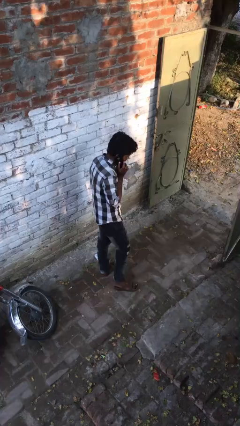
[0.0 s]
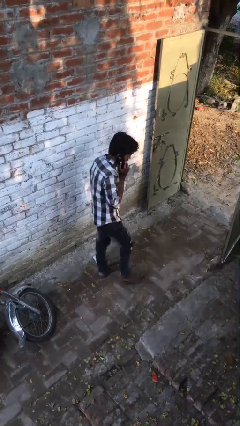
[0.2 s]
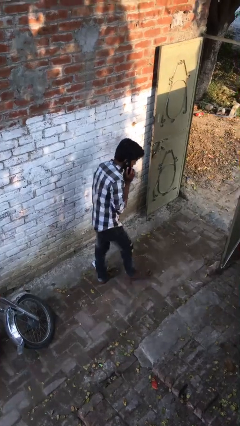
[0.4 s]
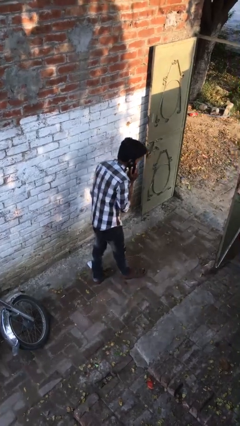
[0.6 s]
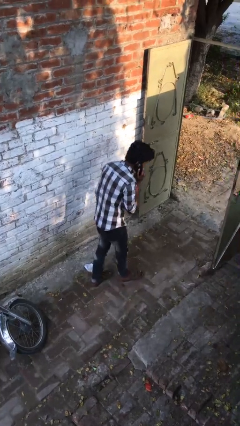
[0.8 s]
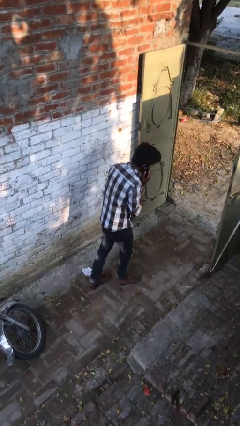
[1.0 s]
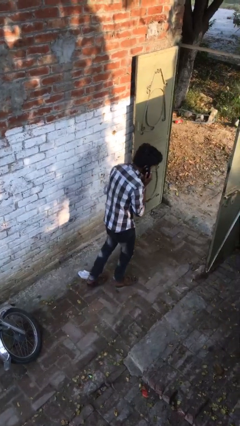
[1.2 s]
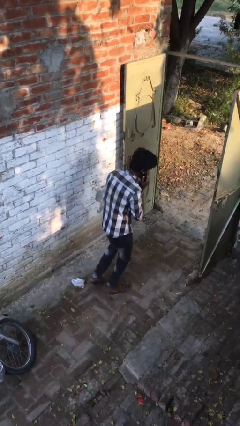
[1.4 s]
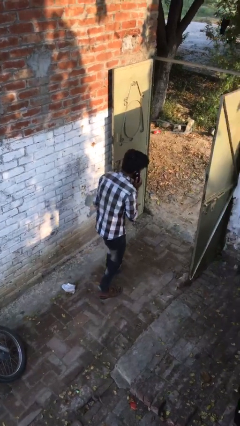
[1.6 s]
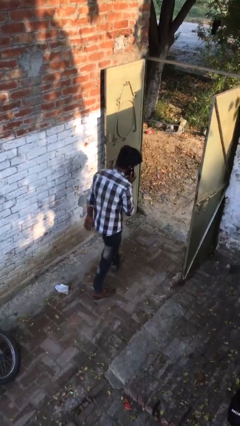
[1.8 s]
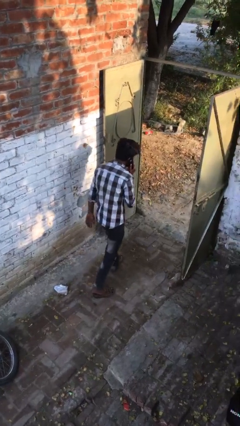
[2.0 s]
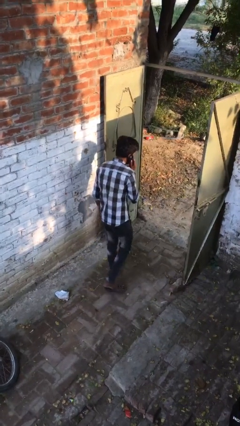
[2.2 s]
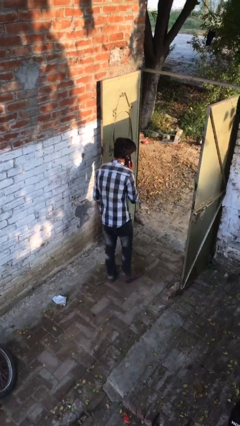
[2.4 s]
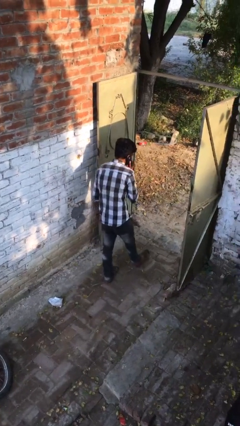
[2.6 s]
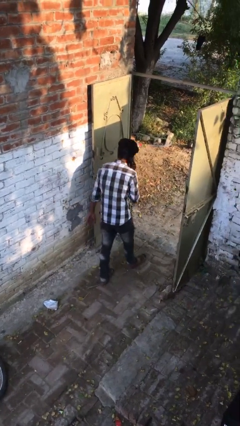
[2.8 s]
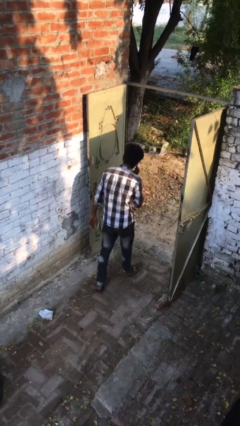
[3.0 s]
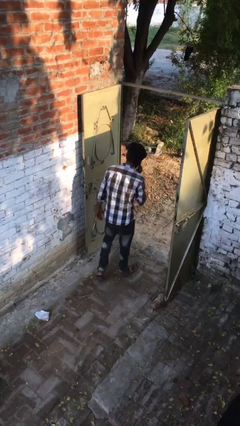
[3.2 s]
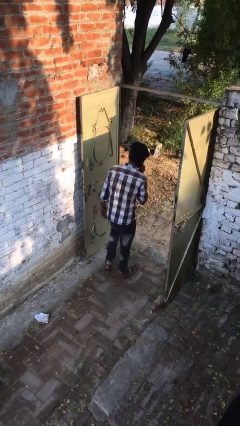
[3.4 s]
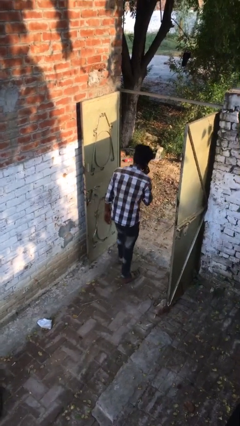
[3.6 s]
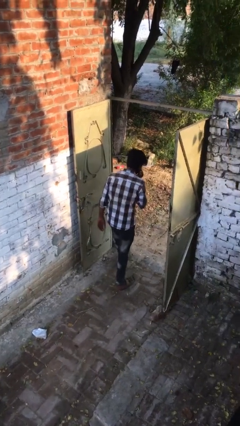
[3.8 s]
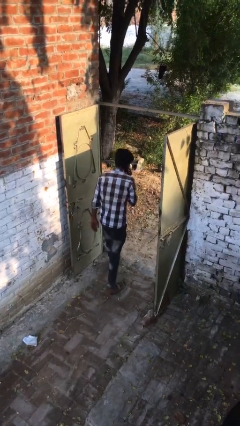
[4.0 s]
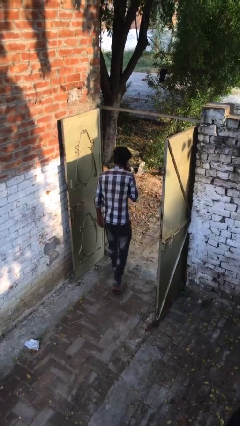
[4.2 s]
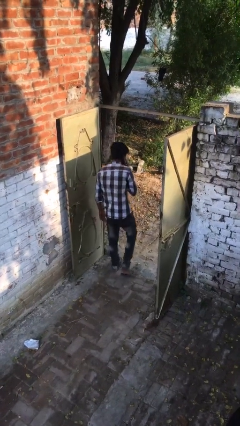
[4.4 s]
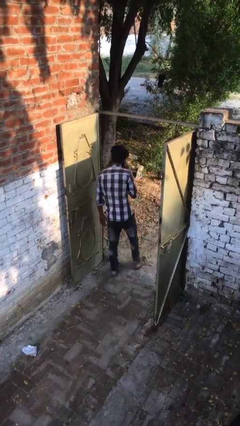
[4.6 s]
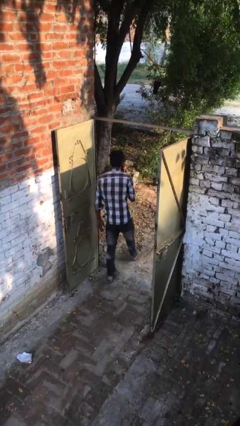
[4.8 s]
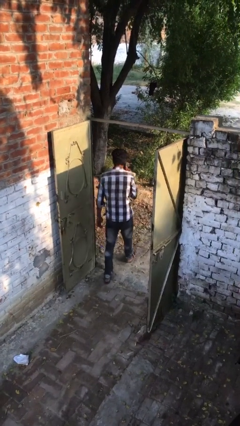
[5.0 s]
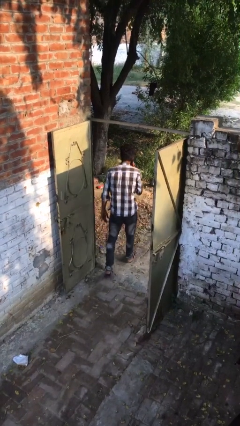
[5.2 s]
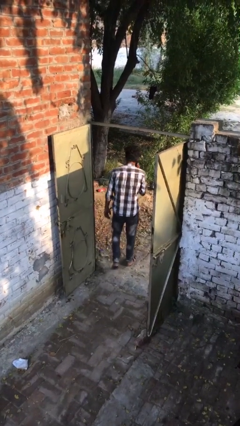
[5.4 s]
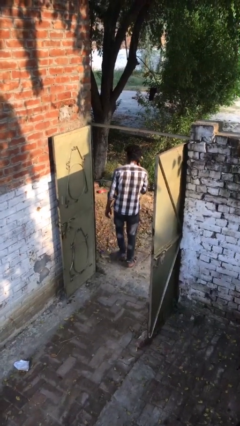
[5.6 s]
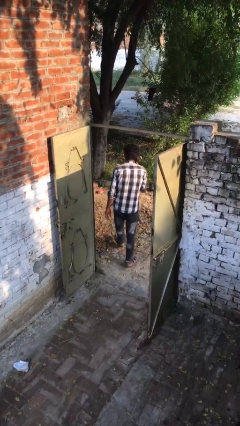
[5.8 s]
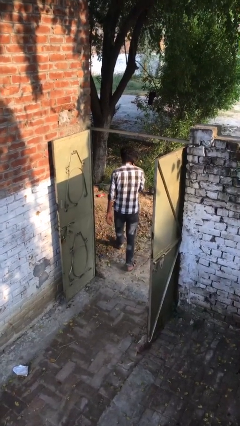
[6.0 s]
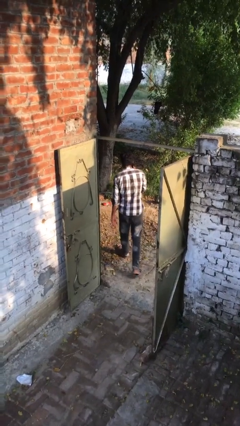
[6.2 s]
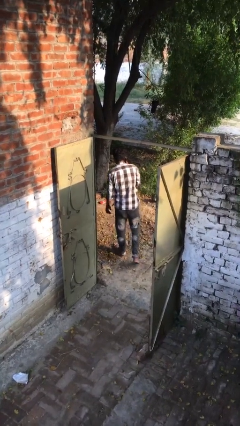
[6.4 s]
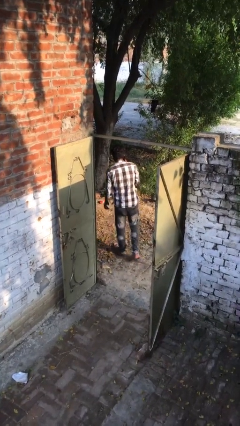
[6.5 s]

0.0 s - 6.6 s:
person exits scene through structure

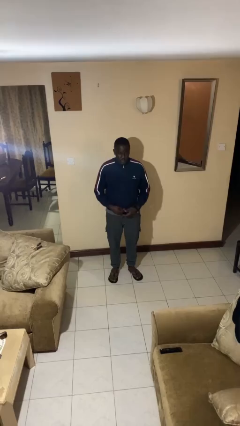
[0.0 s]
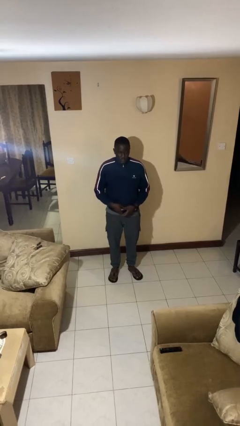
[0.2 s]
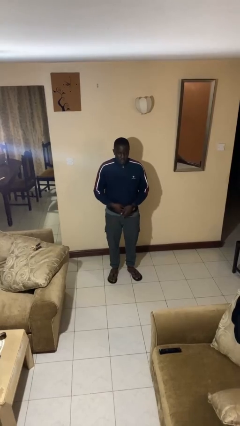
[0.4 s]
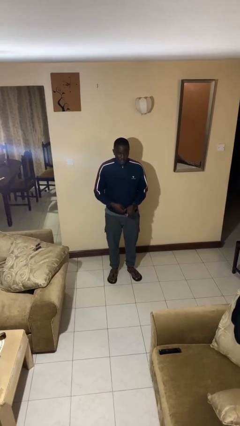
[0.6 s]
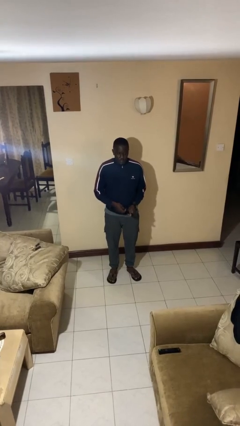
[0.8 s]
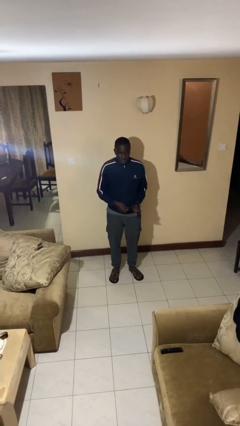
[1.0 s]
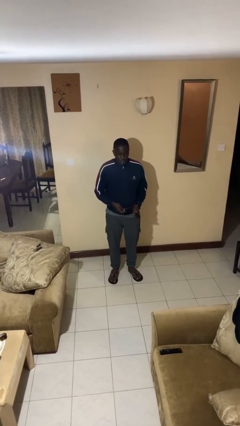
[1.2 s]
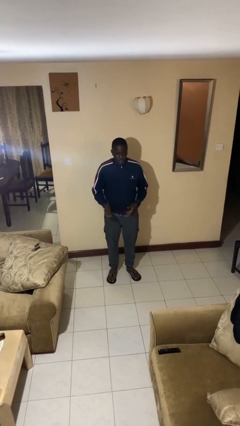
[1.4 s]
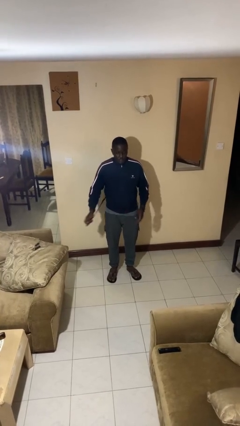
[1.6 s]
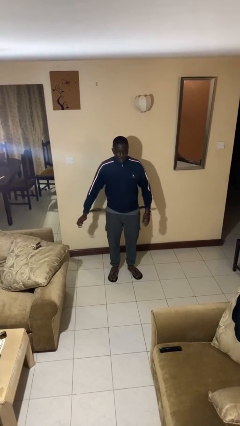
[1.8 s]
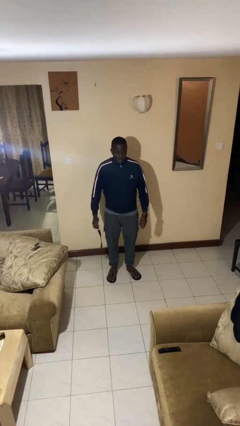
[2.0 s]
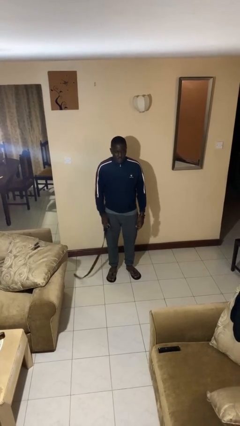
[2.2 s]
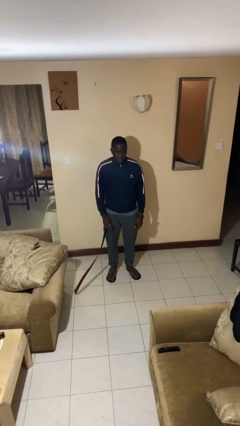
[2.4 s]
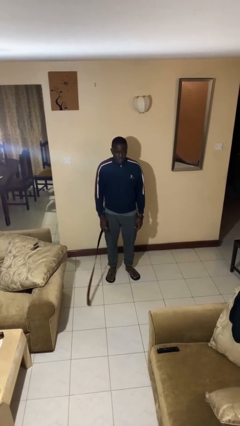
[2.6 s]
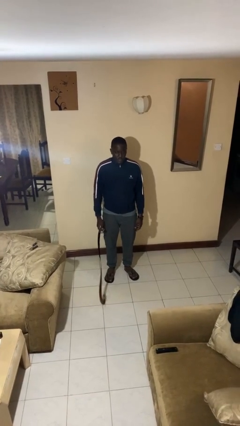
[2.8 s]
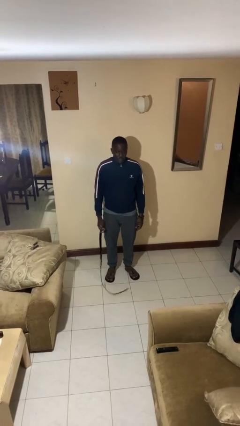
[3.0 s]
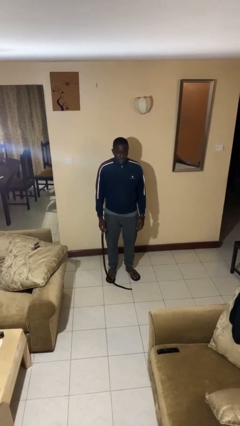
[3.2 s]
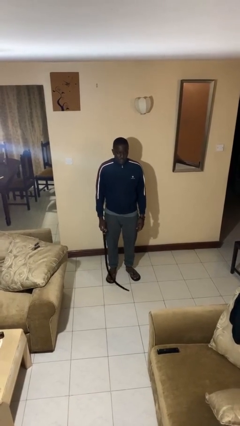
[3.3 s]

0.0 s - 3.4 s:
person takes off belt

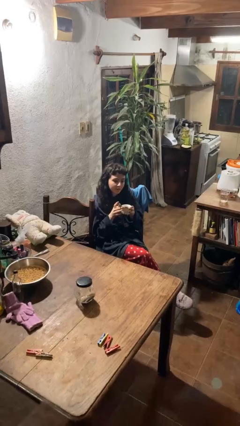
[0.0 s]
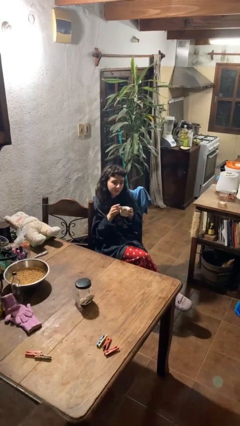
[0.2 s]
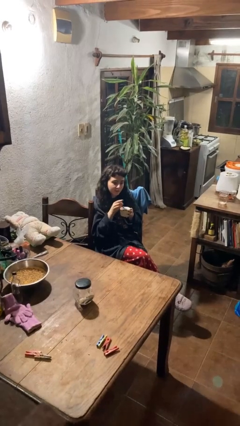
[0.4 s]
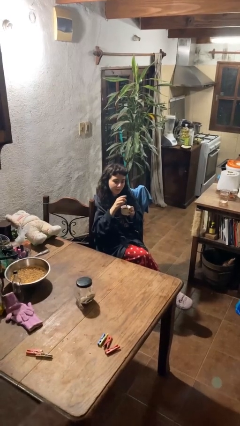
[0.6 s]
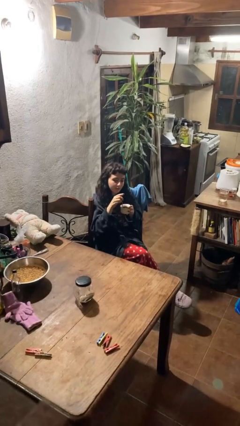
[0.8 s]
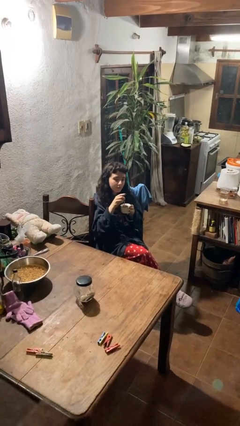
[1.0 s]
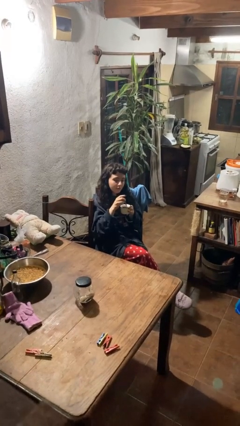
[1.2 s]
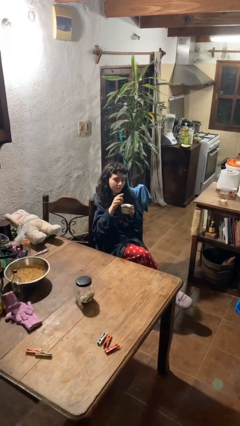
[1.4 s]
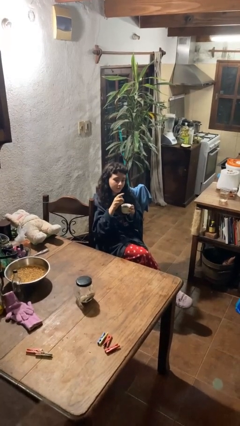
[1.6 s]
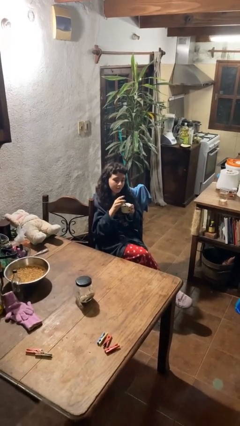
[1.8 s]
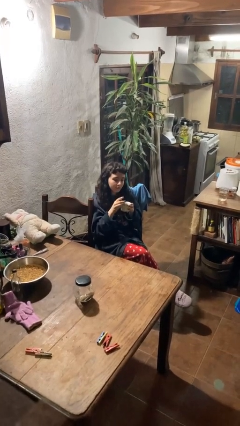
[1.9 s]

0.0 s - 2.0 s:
person stirs mug

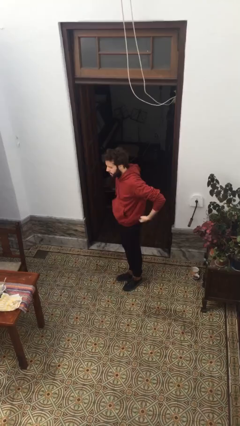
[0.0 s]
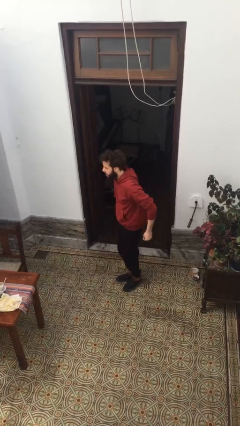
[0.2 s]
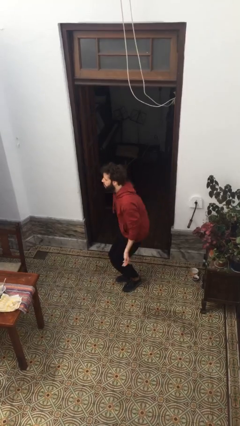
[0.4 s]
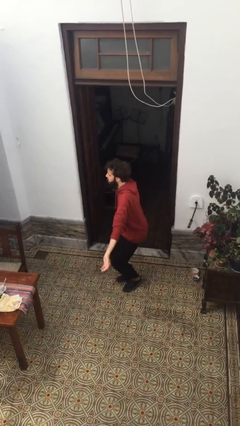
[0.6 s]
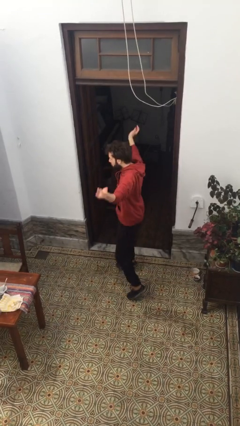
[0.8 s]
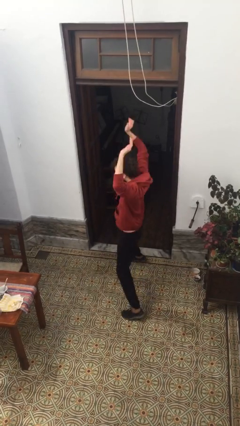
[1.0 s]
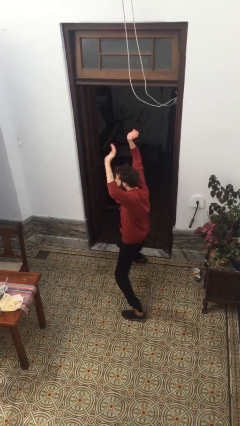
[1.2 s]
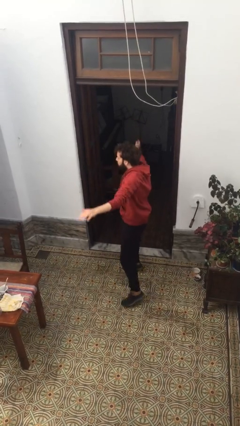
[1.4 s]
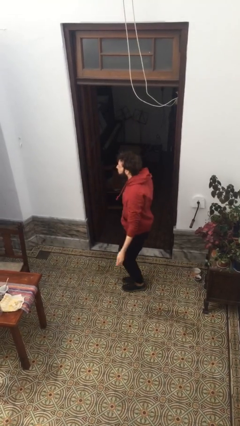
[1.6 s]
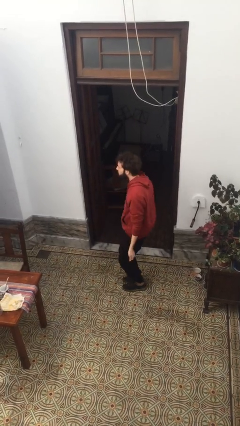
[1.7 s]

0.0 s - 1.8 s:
person exercises with jumping jacks

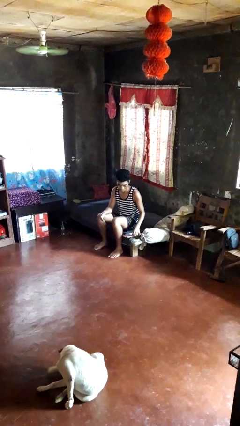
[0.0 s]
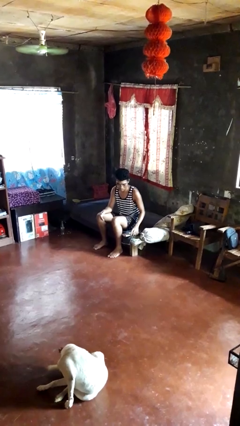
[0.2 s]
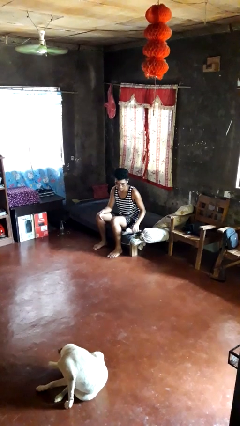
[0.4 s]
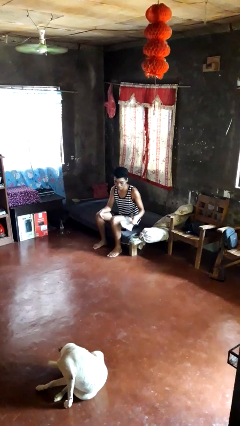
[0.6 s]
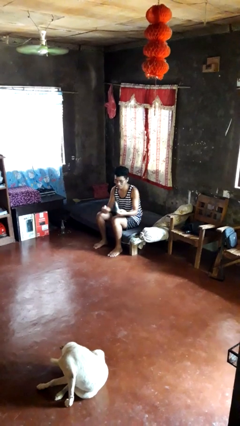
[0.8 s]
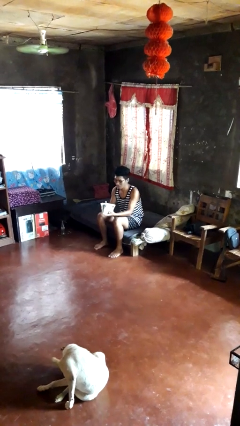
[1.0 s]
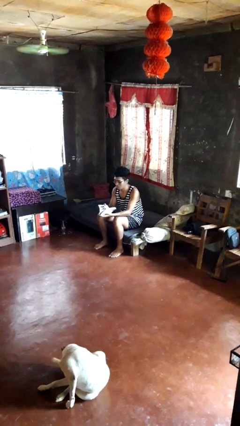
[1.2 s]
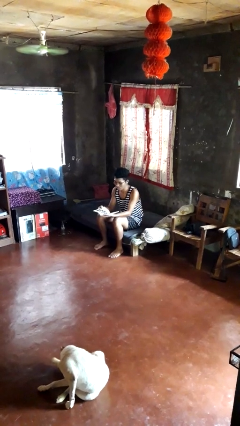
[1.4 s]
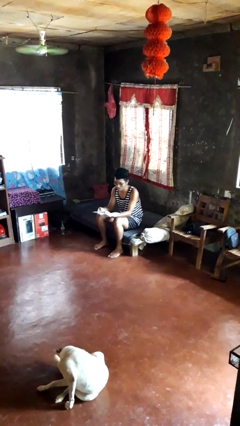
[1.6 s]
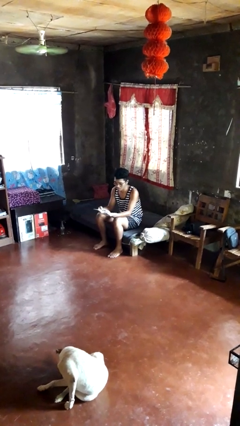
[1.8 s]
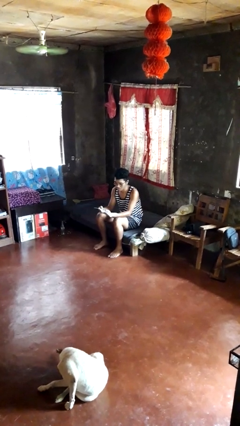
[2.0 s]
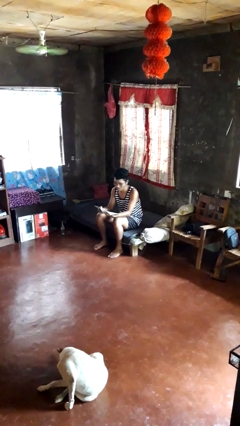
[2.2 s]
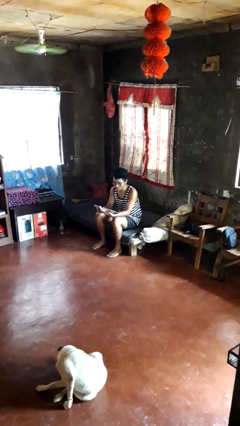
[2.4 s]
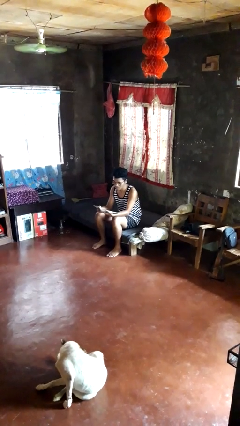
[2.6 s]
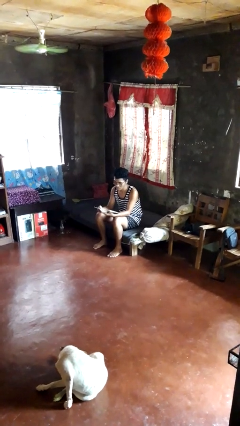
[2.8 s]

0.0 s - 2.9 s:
person reads magazine

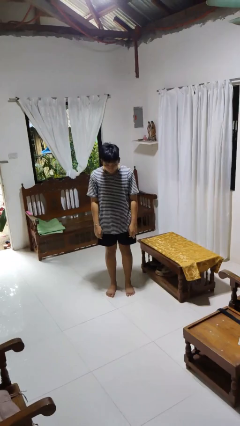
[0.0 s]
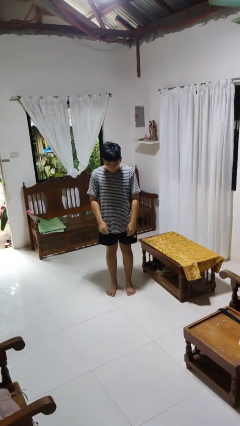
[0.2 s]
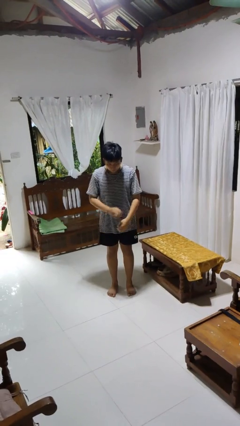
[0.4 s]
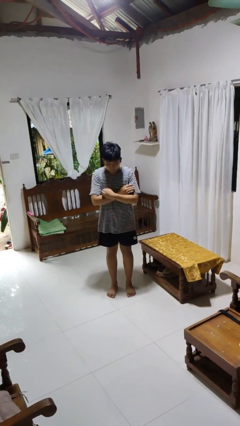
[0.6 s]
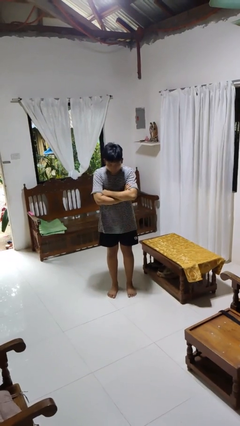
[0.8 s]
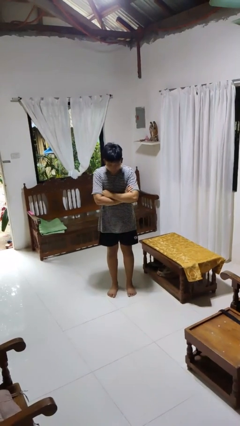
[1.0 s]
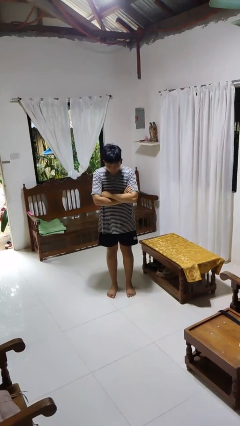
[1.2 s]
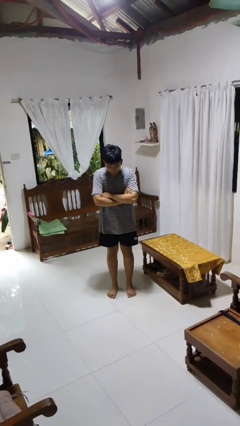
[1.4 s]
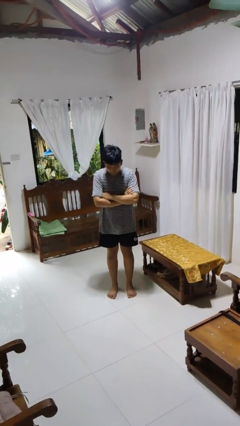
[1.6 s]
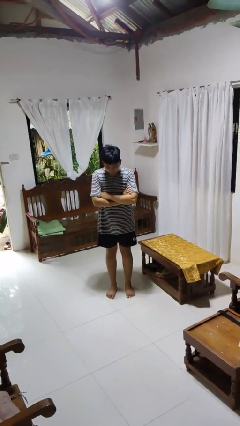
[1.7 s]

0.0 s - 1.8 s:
person gestures arms x
